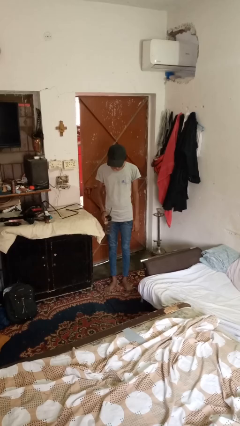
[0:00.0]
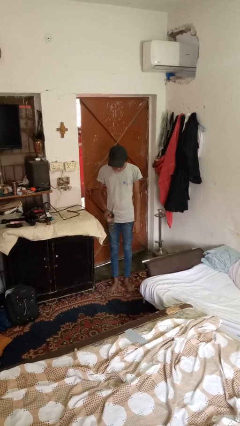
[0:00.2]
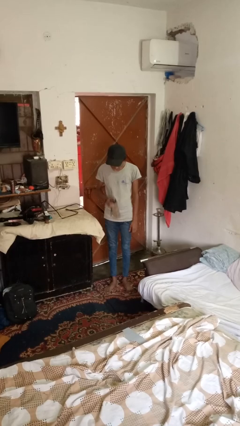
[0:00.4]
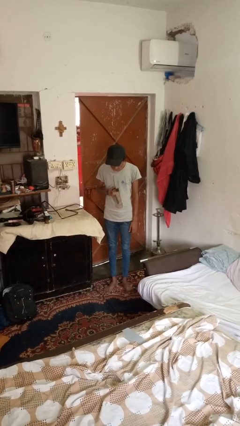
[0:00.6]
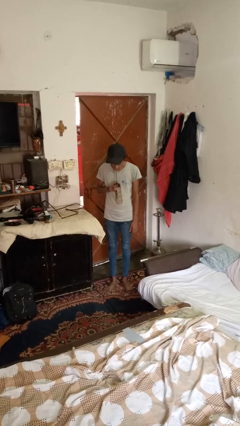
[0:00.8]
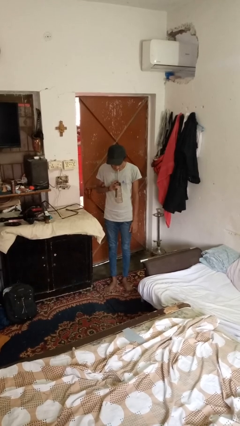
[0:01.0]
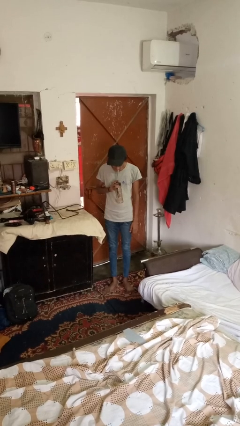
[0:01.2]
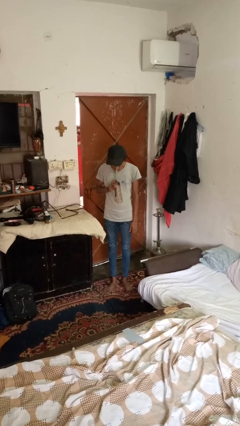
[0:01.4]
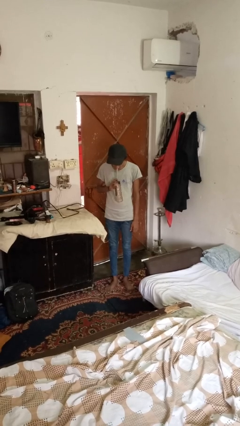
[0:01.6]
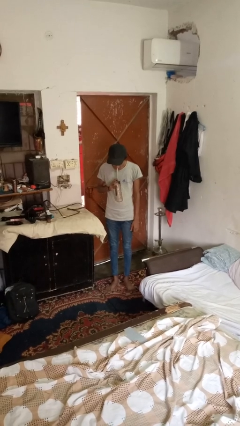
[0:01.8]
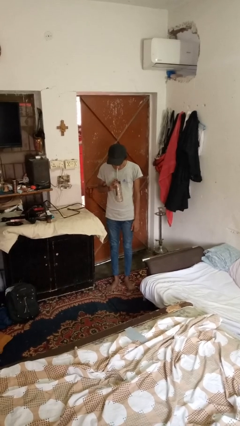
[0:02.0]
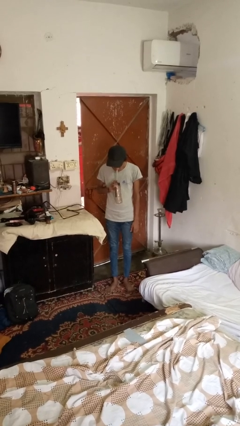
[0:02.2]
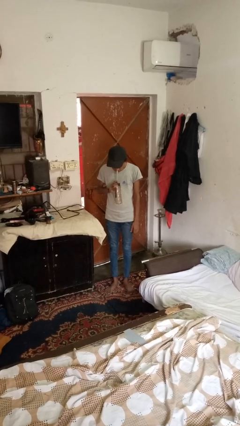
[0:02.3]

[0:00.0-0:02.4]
person drinks from straw

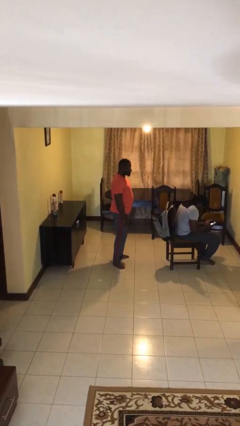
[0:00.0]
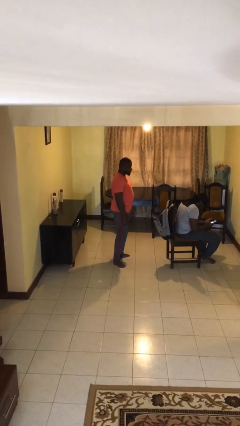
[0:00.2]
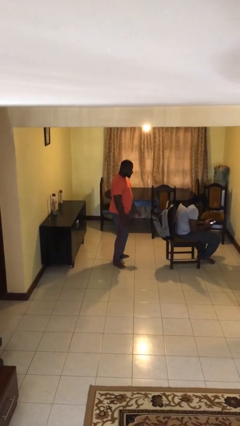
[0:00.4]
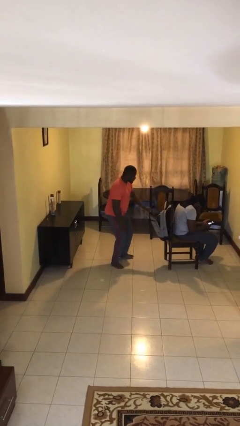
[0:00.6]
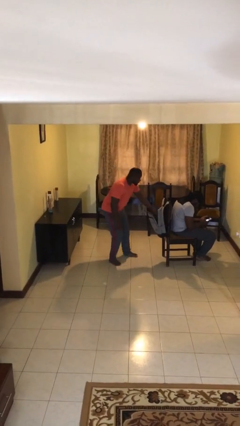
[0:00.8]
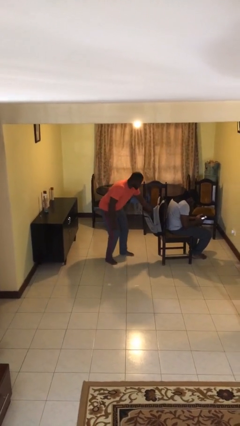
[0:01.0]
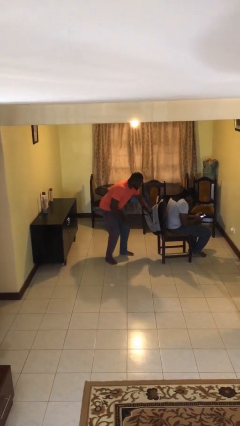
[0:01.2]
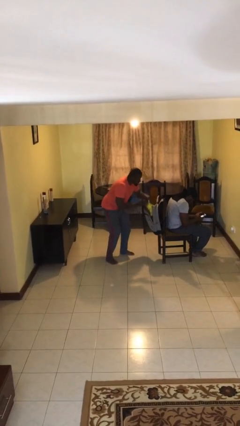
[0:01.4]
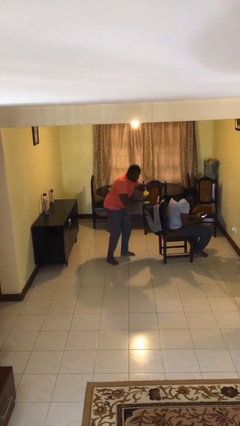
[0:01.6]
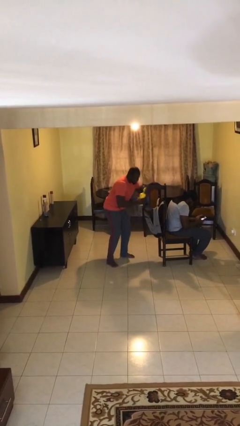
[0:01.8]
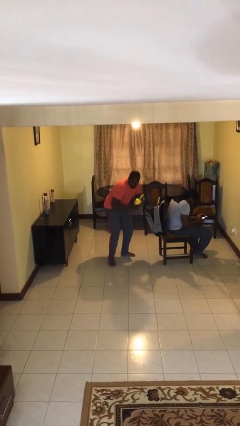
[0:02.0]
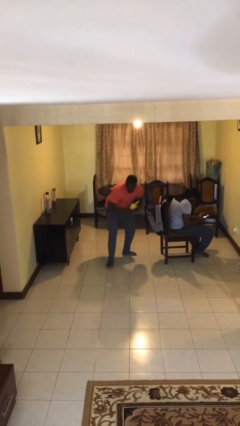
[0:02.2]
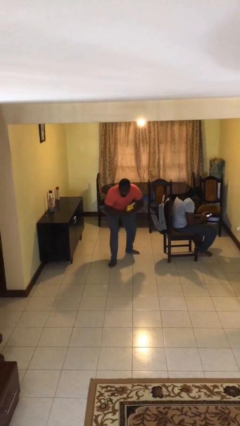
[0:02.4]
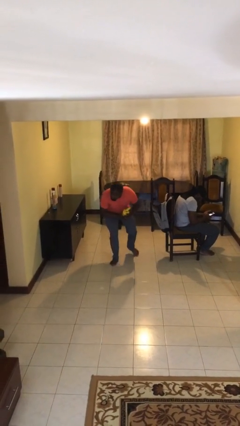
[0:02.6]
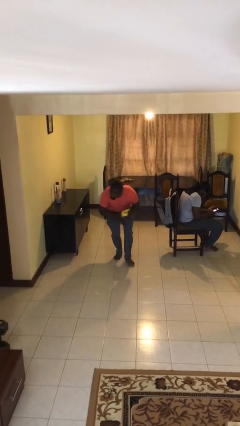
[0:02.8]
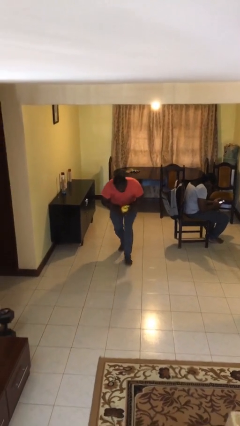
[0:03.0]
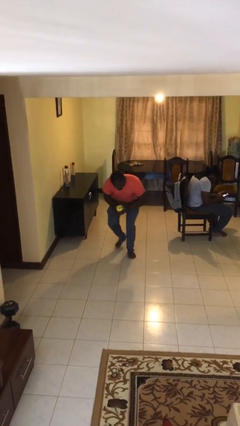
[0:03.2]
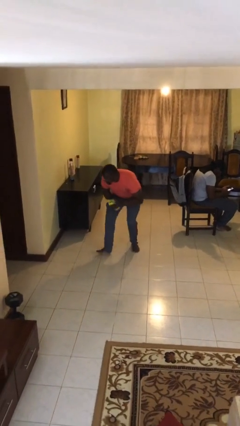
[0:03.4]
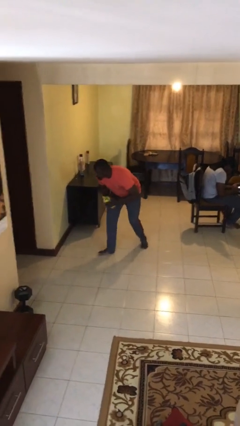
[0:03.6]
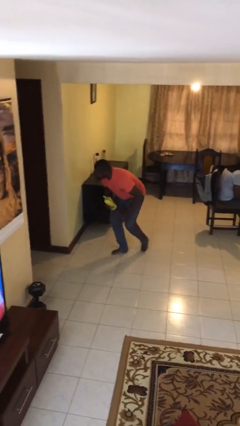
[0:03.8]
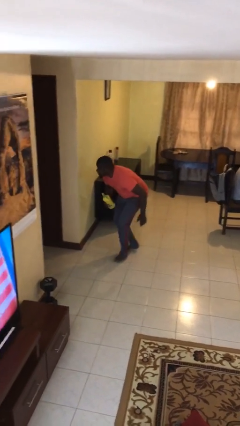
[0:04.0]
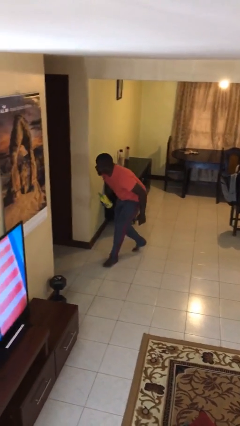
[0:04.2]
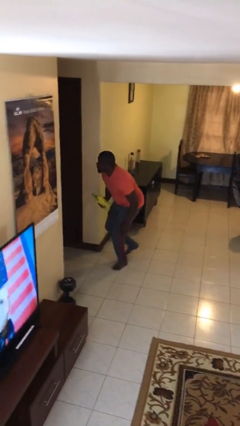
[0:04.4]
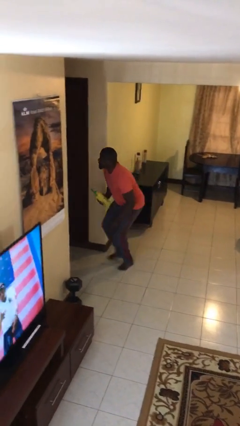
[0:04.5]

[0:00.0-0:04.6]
person steals object from person

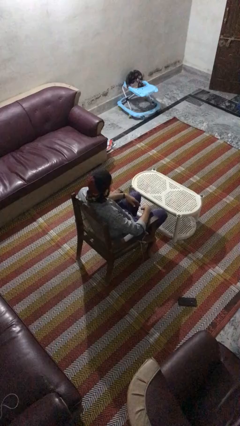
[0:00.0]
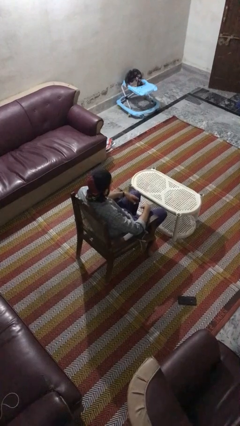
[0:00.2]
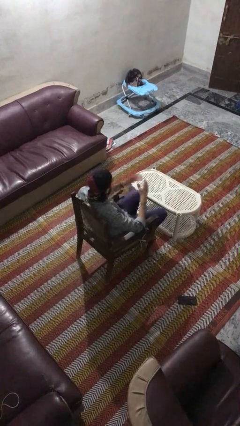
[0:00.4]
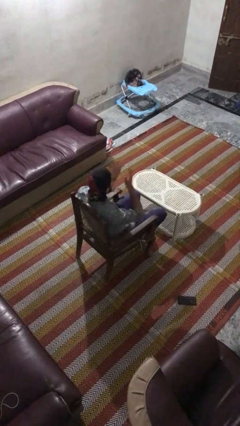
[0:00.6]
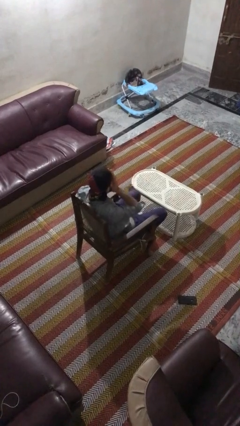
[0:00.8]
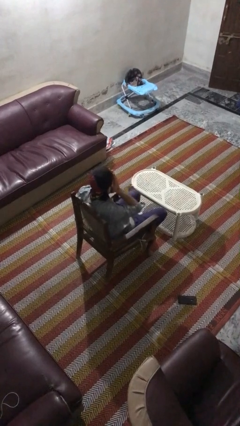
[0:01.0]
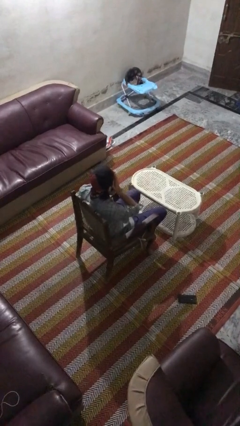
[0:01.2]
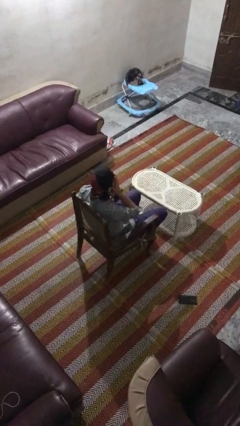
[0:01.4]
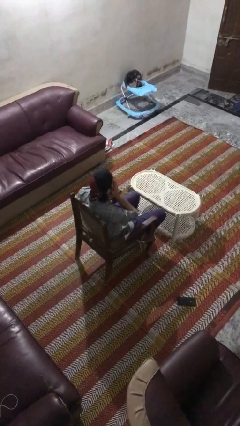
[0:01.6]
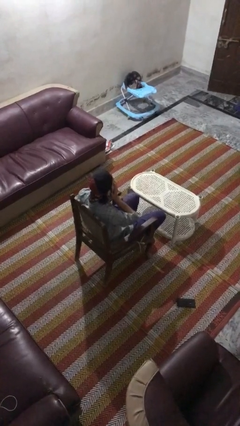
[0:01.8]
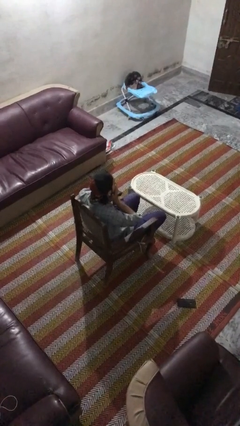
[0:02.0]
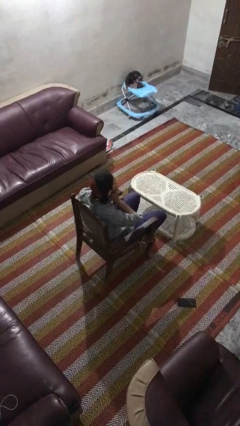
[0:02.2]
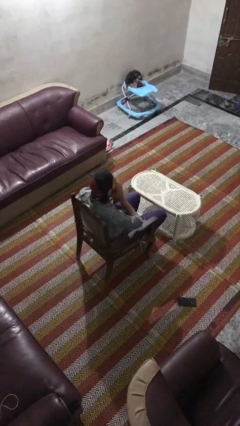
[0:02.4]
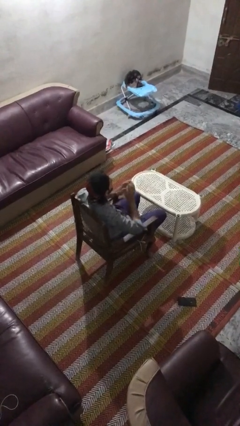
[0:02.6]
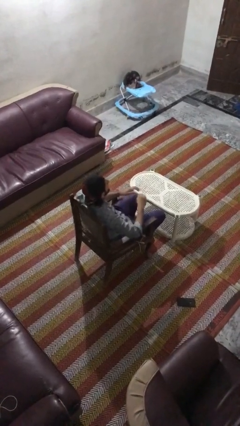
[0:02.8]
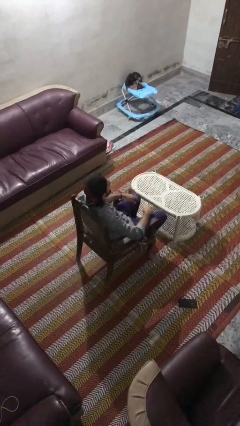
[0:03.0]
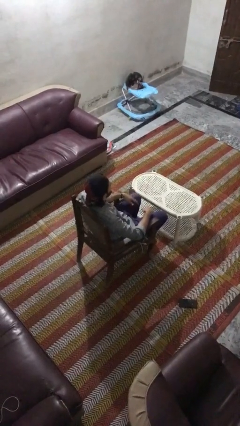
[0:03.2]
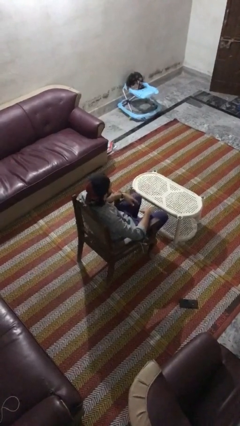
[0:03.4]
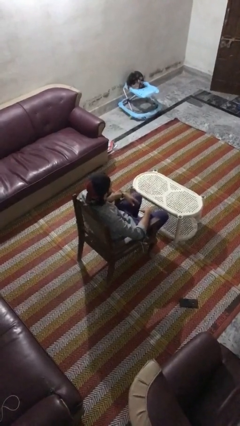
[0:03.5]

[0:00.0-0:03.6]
person covers face with hands

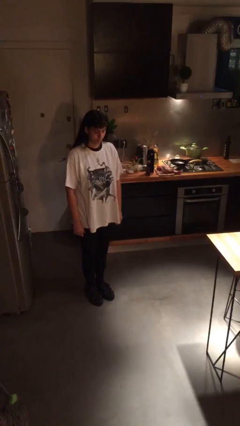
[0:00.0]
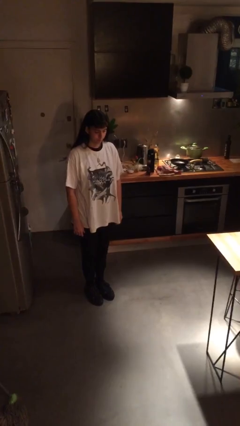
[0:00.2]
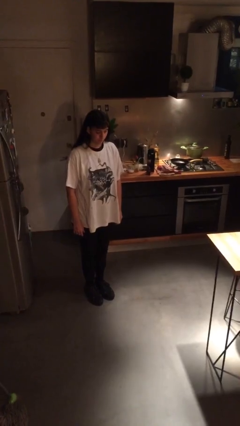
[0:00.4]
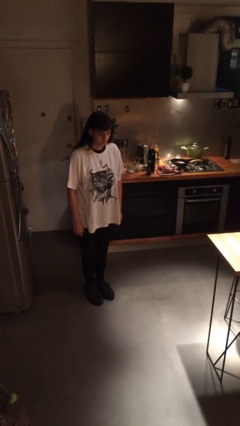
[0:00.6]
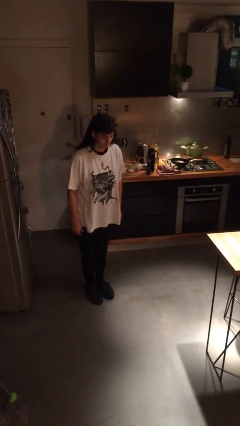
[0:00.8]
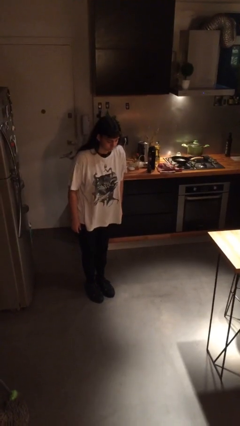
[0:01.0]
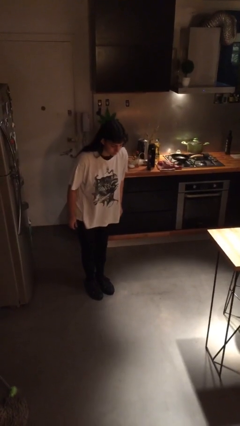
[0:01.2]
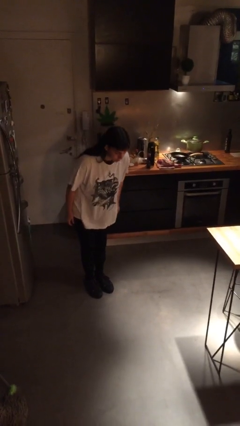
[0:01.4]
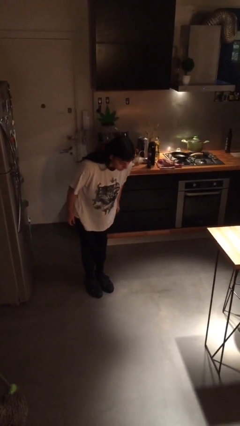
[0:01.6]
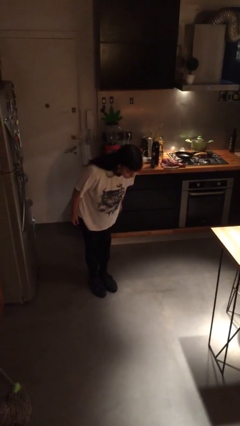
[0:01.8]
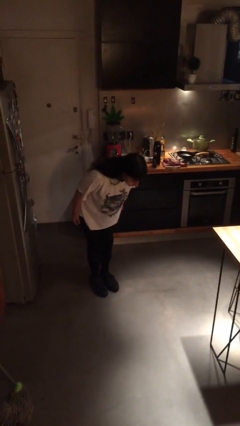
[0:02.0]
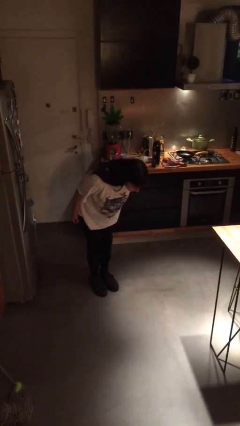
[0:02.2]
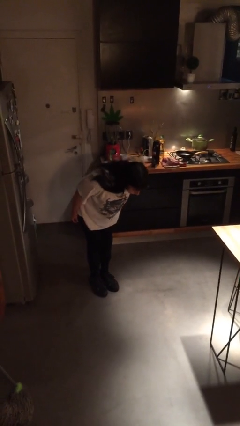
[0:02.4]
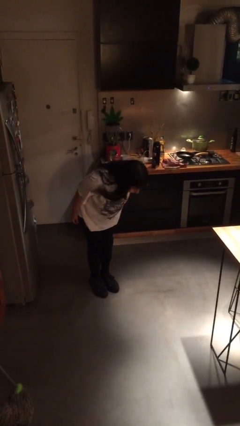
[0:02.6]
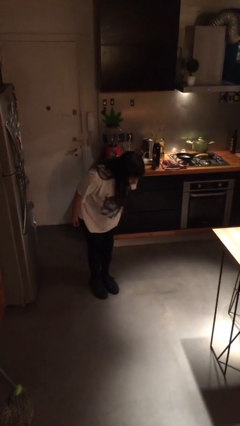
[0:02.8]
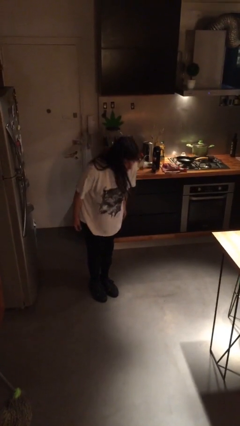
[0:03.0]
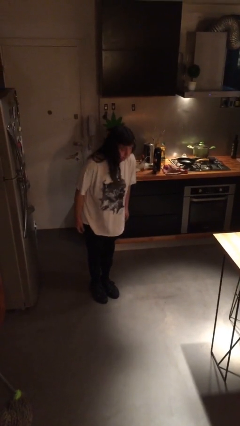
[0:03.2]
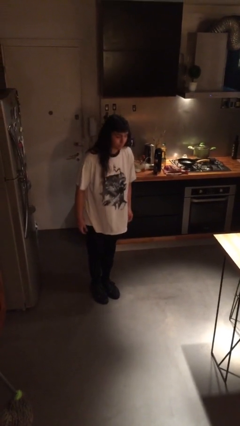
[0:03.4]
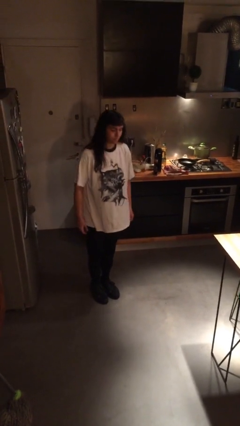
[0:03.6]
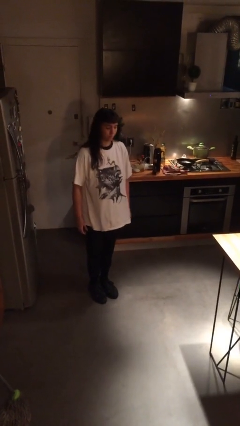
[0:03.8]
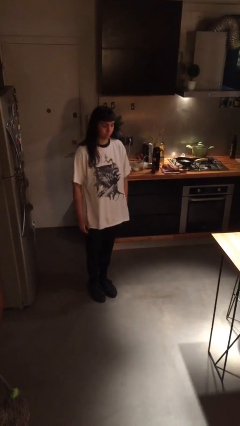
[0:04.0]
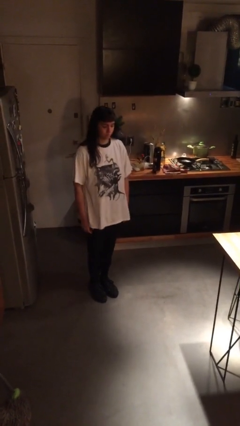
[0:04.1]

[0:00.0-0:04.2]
person bows

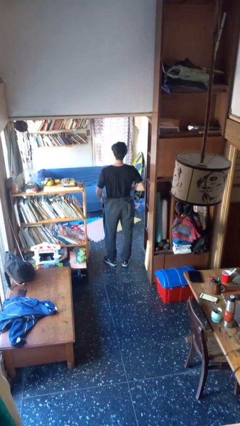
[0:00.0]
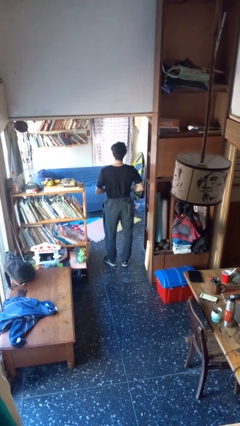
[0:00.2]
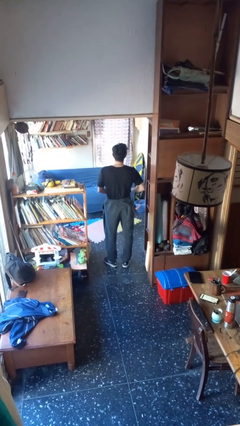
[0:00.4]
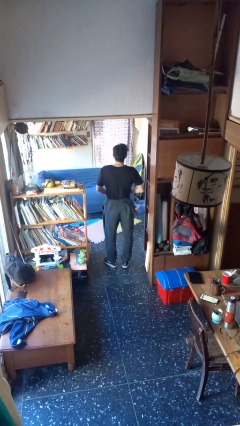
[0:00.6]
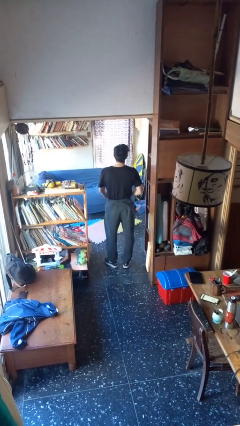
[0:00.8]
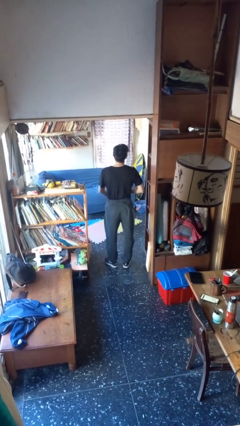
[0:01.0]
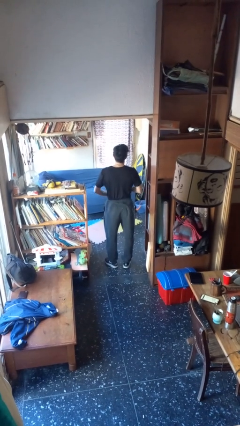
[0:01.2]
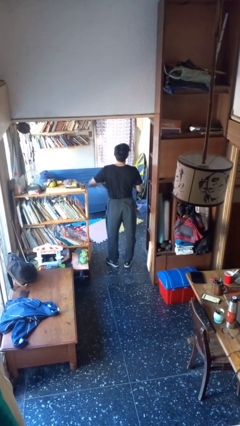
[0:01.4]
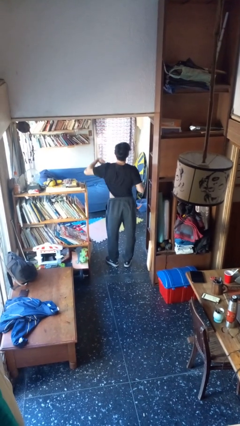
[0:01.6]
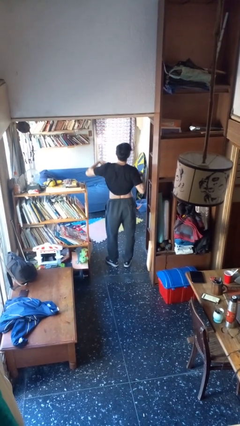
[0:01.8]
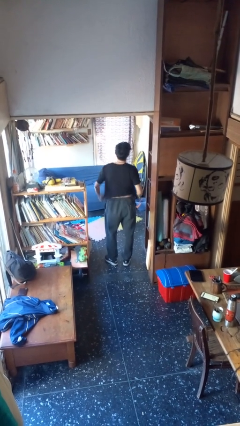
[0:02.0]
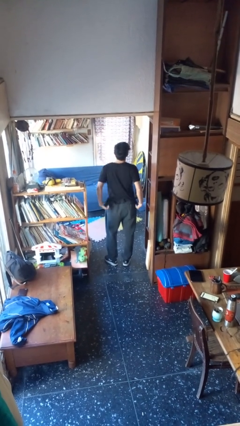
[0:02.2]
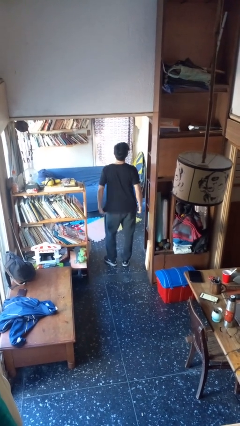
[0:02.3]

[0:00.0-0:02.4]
person untucks shirt

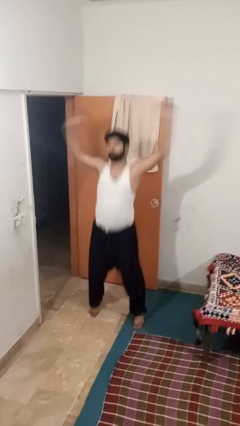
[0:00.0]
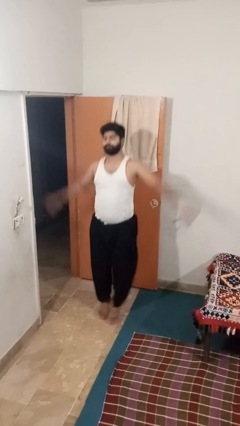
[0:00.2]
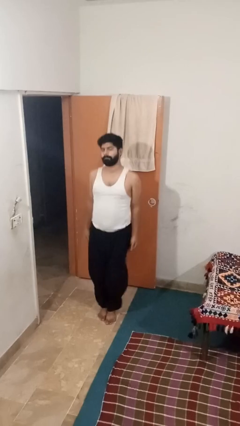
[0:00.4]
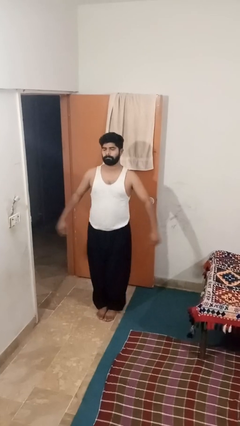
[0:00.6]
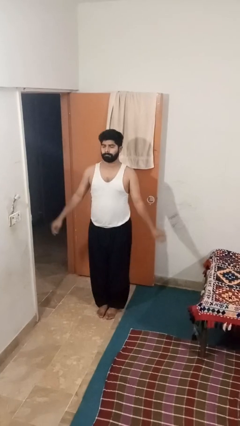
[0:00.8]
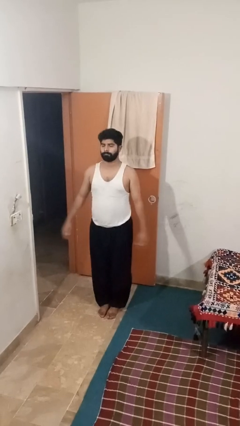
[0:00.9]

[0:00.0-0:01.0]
person exercises with jumping jacks
